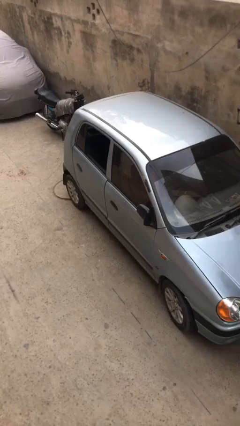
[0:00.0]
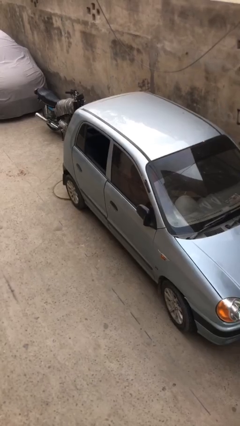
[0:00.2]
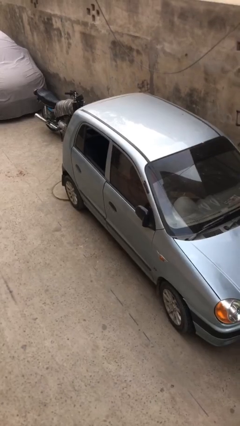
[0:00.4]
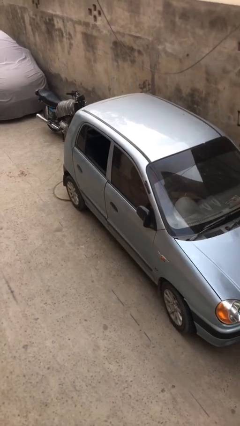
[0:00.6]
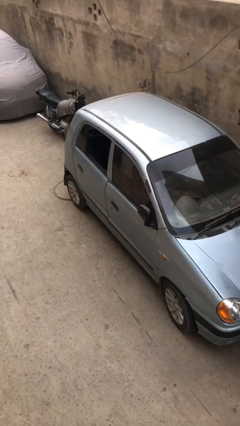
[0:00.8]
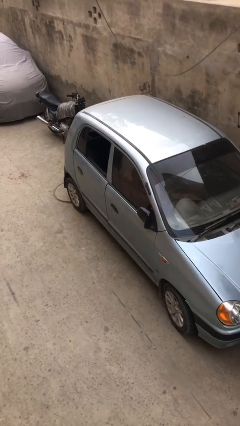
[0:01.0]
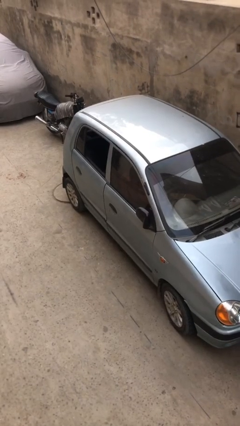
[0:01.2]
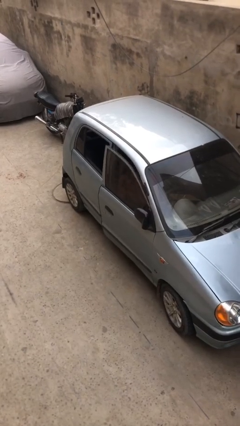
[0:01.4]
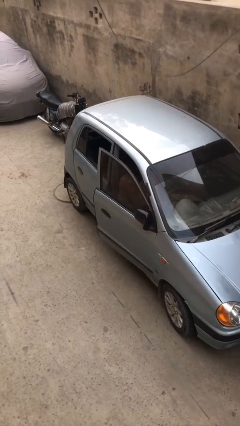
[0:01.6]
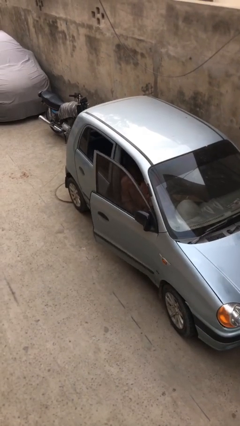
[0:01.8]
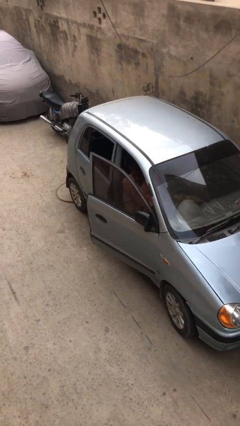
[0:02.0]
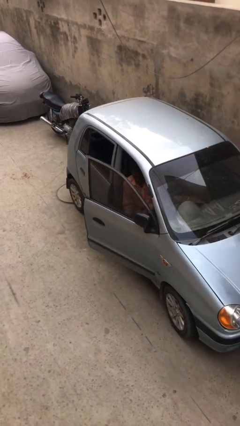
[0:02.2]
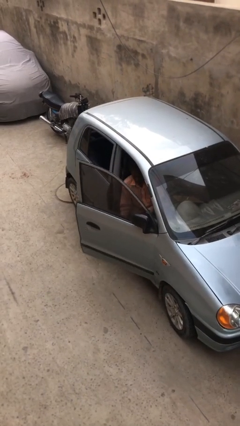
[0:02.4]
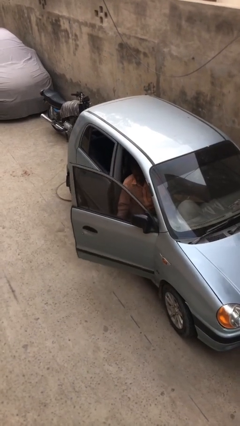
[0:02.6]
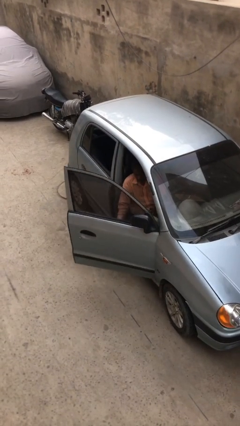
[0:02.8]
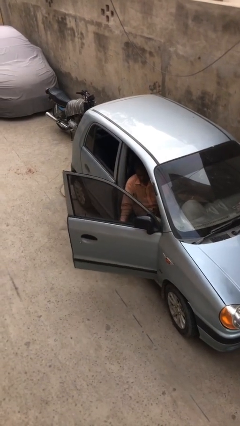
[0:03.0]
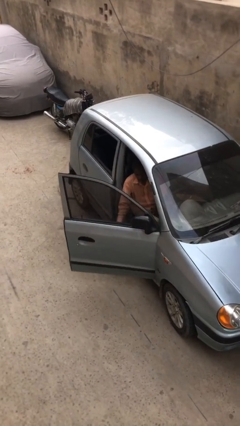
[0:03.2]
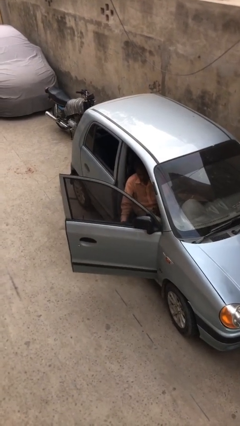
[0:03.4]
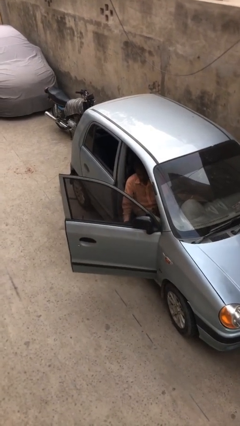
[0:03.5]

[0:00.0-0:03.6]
person opens car door

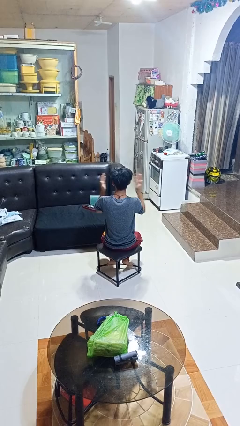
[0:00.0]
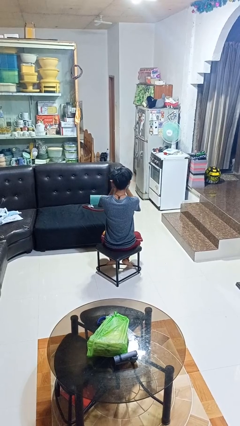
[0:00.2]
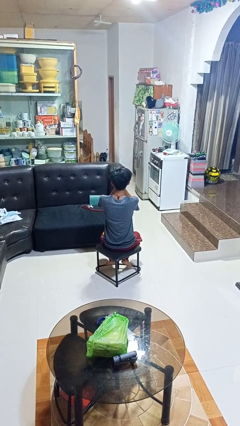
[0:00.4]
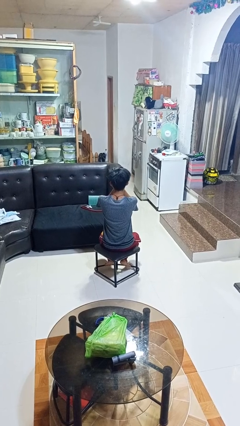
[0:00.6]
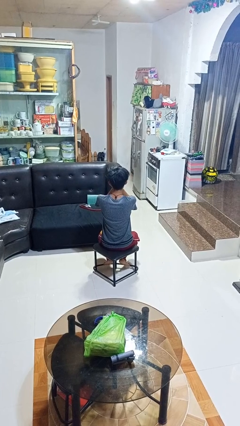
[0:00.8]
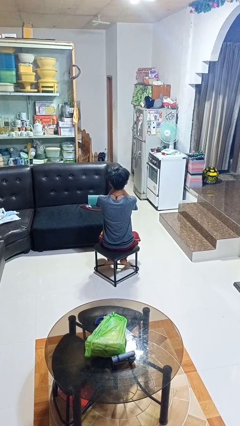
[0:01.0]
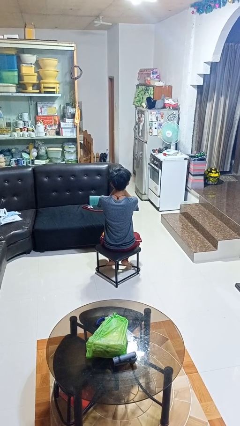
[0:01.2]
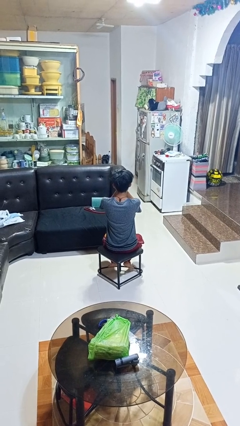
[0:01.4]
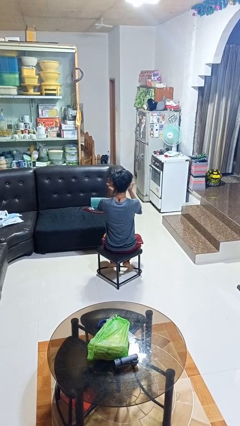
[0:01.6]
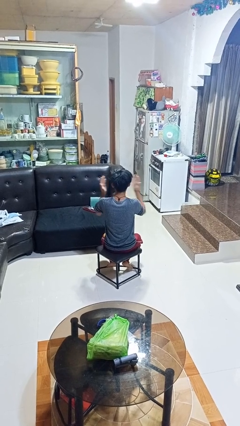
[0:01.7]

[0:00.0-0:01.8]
person covers face with hands

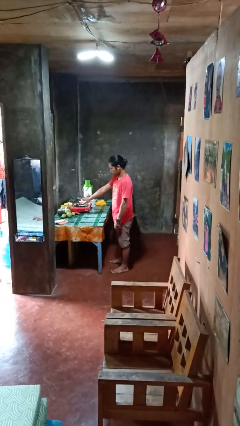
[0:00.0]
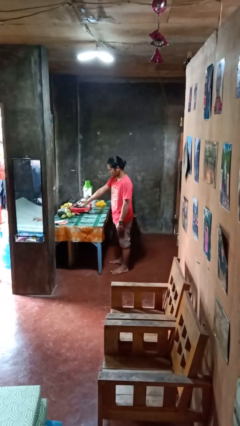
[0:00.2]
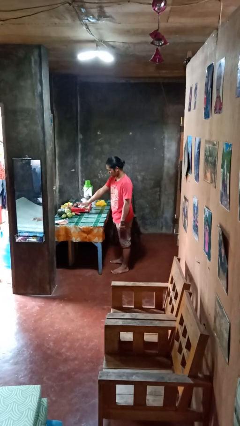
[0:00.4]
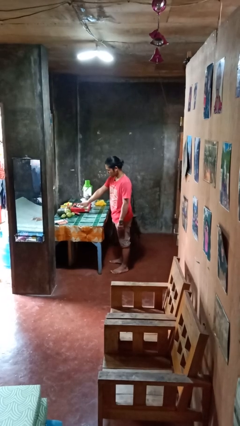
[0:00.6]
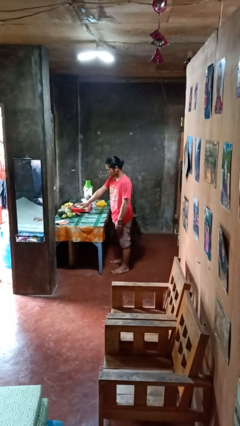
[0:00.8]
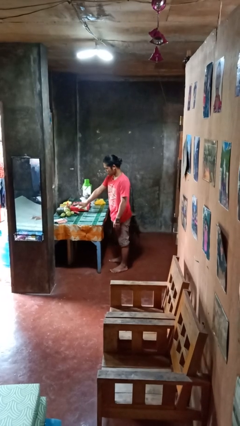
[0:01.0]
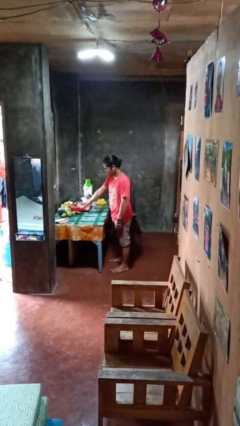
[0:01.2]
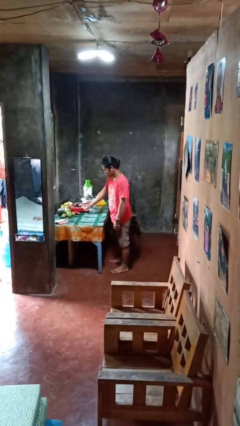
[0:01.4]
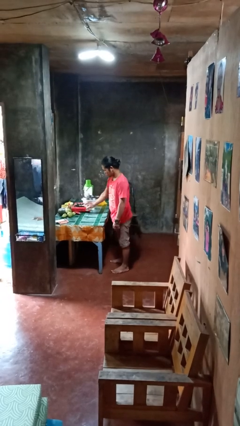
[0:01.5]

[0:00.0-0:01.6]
person sprays from bottle

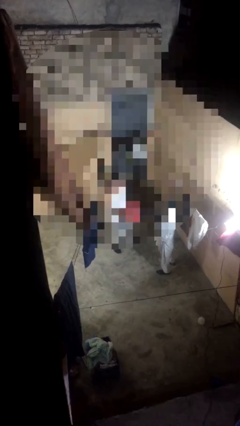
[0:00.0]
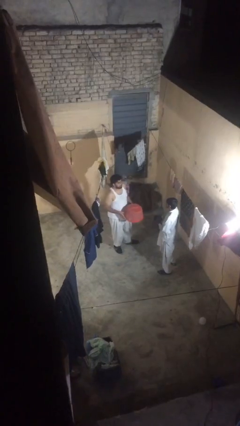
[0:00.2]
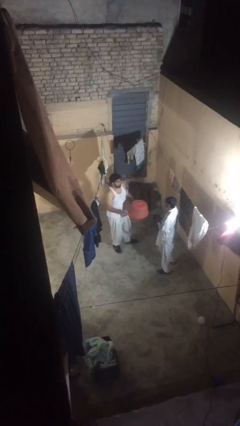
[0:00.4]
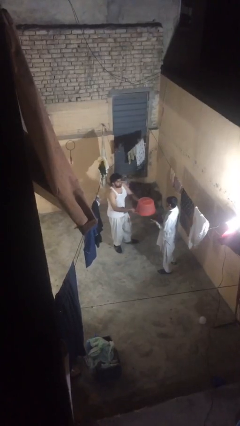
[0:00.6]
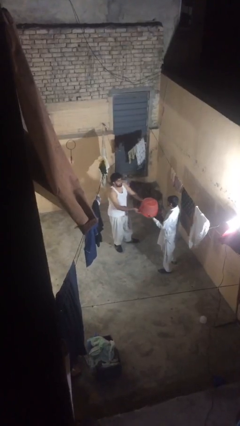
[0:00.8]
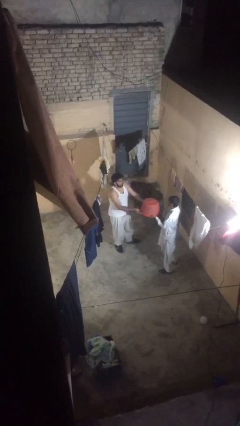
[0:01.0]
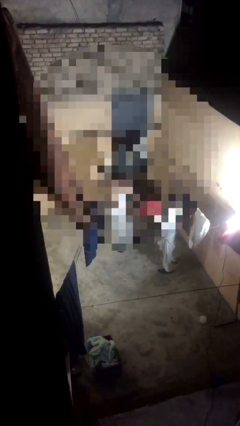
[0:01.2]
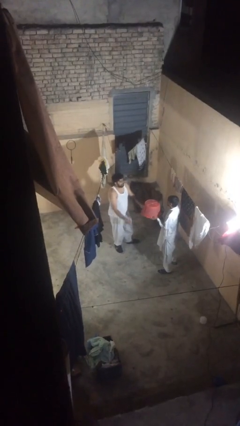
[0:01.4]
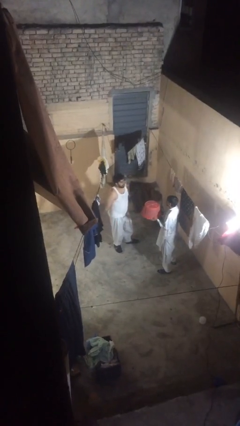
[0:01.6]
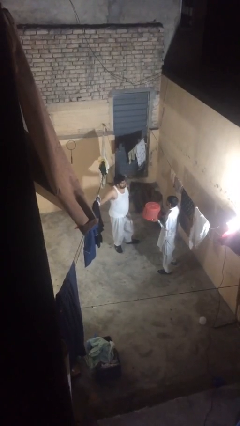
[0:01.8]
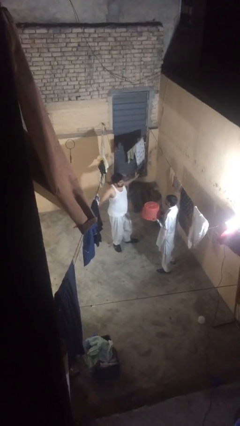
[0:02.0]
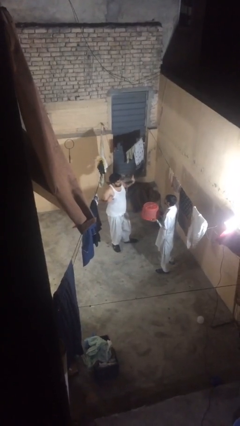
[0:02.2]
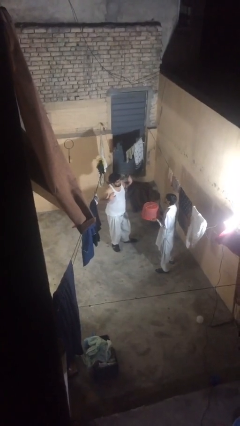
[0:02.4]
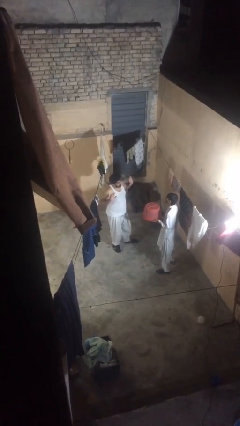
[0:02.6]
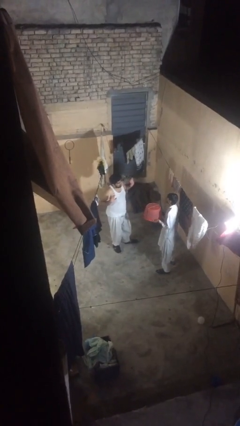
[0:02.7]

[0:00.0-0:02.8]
person transfers object to person

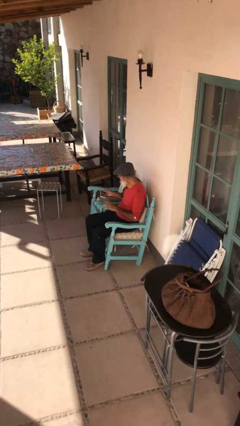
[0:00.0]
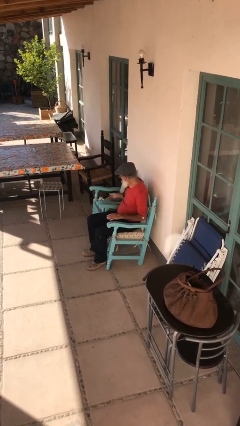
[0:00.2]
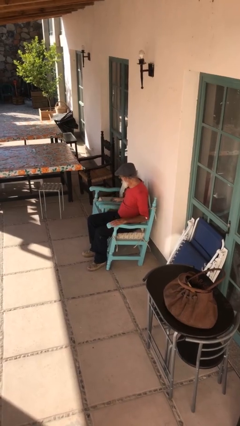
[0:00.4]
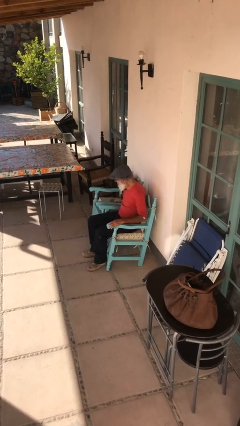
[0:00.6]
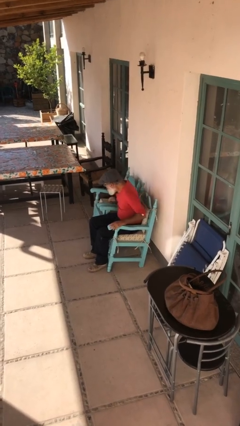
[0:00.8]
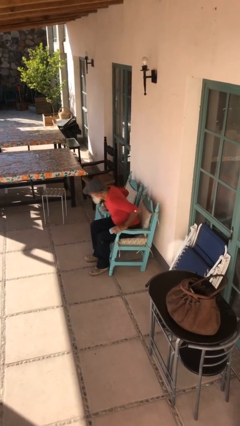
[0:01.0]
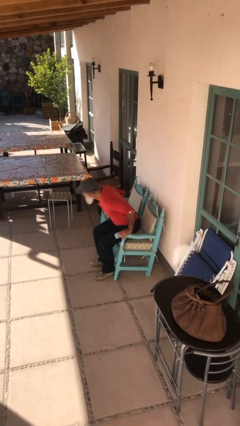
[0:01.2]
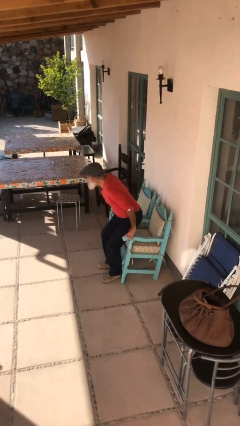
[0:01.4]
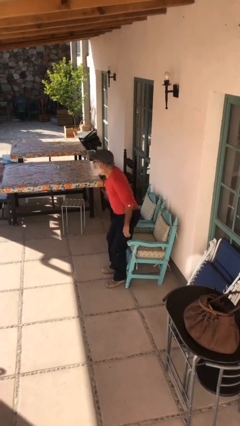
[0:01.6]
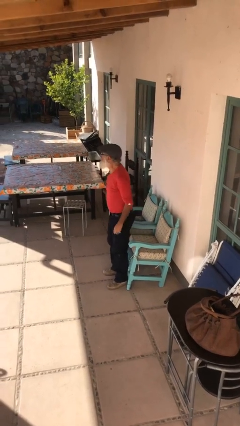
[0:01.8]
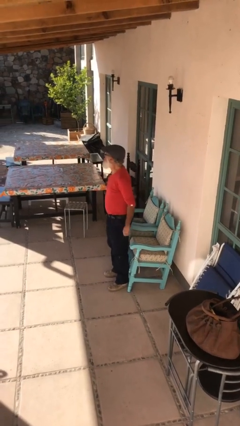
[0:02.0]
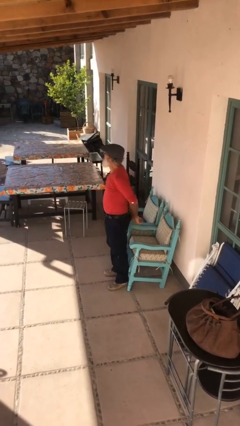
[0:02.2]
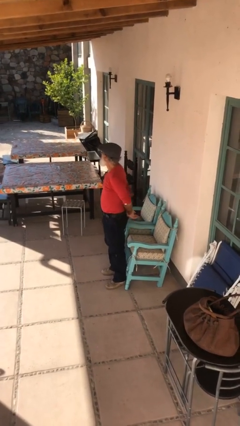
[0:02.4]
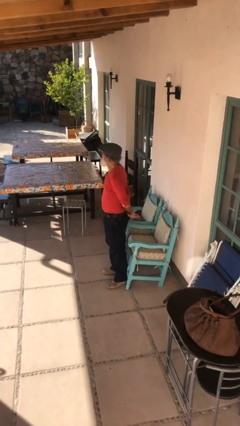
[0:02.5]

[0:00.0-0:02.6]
person stands up

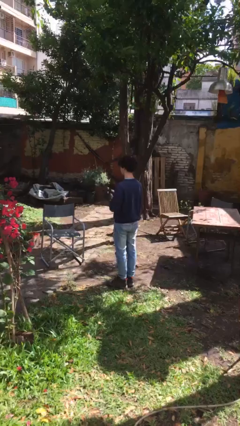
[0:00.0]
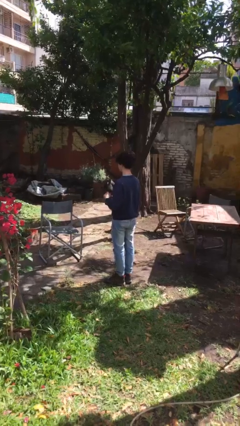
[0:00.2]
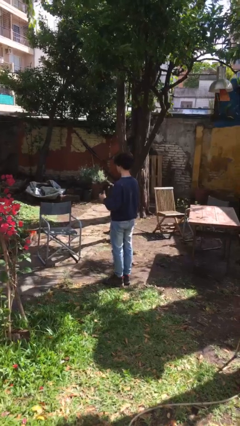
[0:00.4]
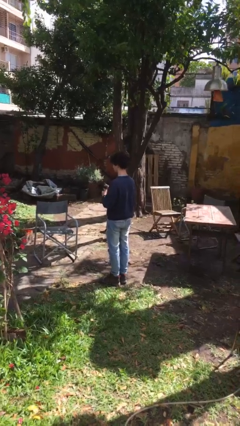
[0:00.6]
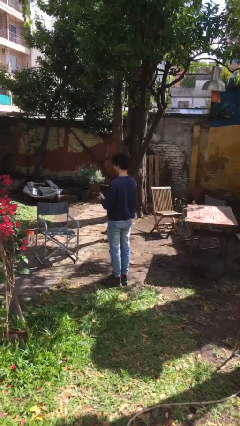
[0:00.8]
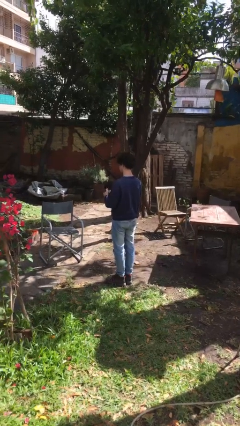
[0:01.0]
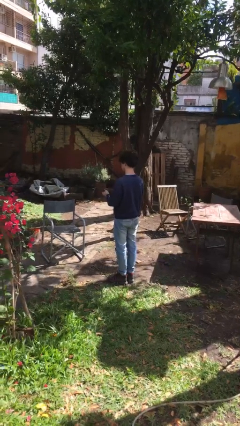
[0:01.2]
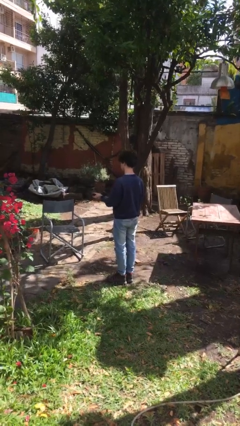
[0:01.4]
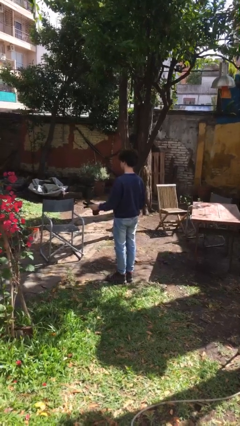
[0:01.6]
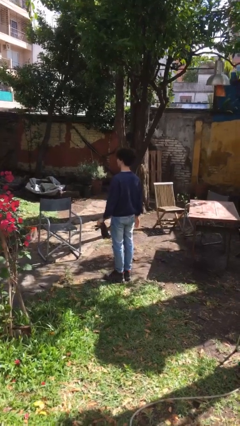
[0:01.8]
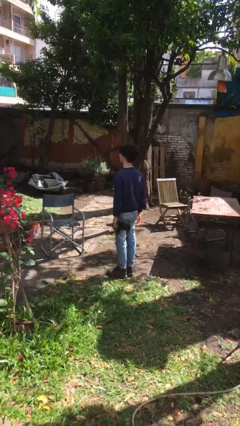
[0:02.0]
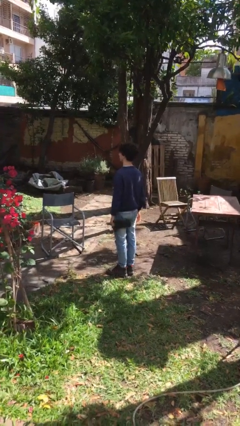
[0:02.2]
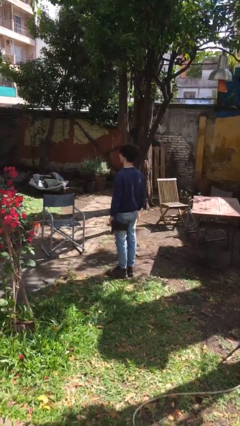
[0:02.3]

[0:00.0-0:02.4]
person takes off gloves

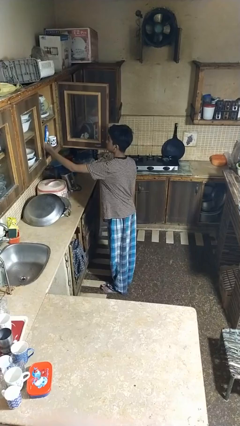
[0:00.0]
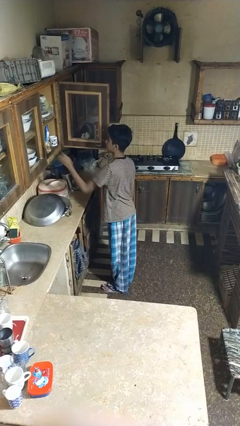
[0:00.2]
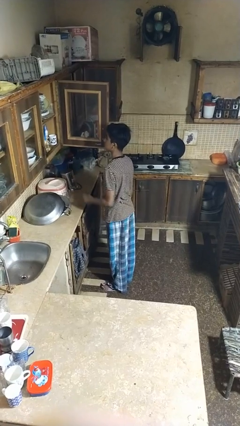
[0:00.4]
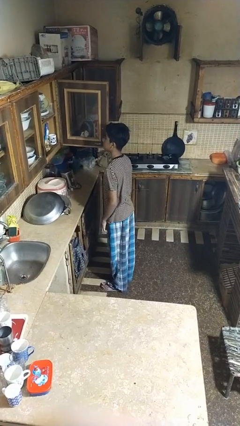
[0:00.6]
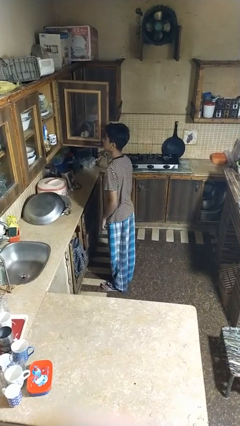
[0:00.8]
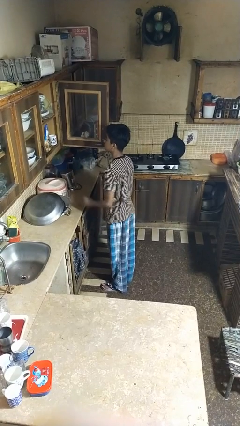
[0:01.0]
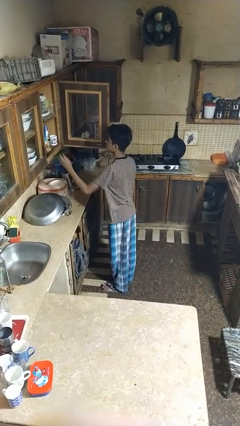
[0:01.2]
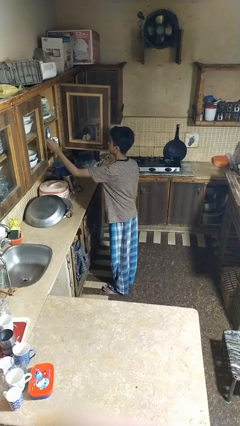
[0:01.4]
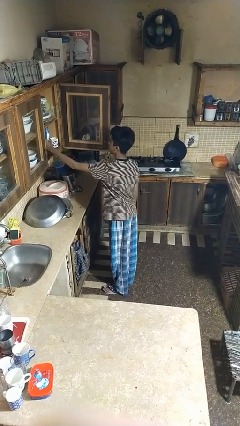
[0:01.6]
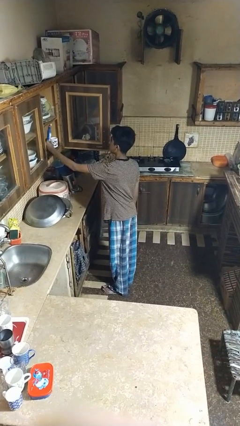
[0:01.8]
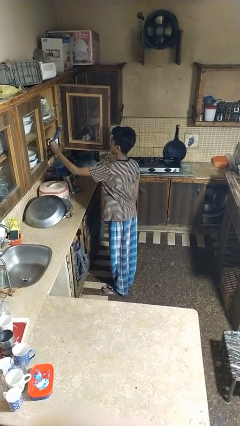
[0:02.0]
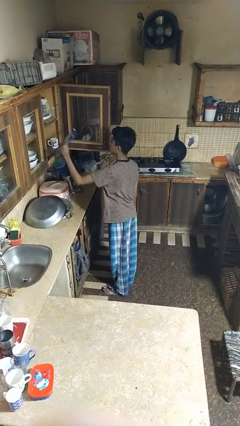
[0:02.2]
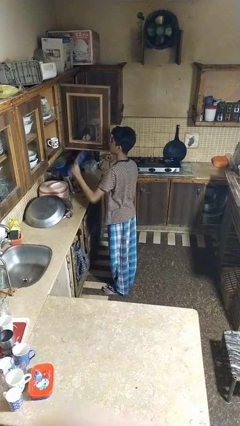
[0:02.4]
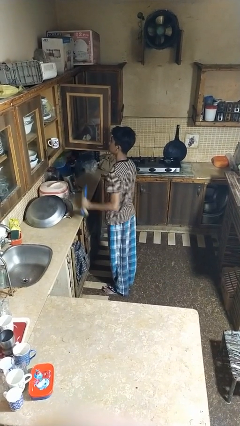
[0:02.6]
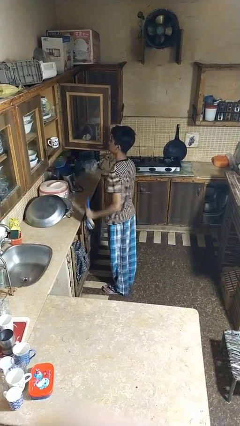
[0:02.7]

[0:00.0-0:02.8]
person takes object from cabinet
